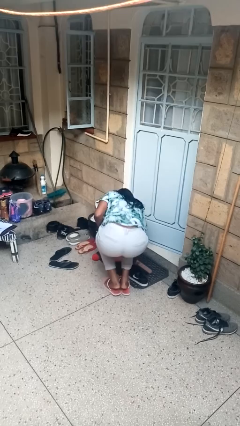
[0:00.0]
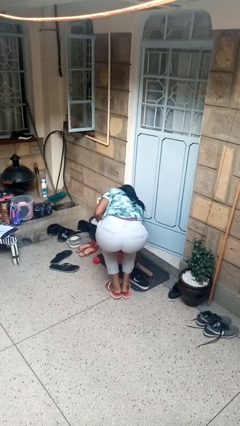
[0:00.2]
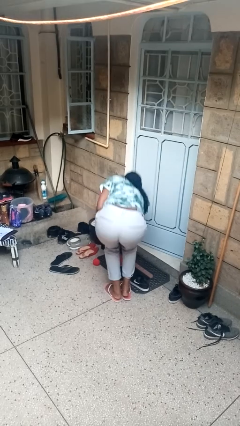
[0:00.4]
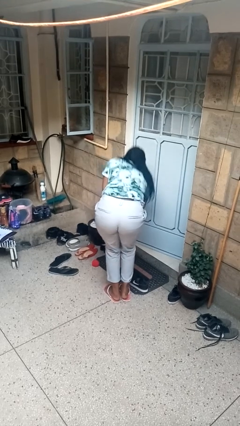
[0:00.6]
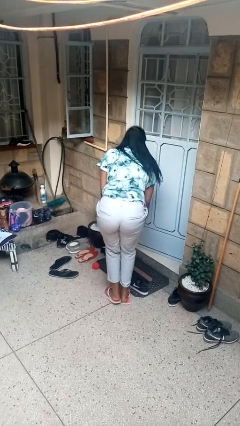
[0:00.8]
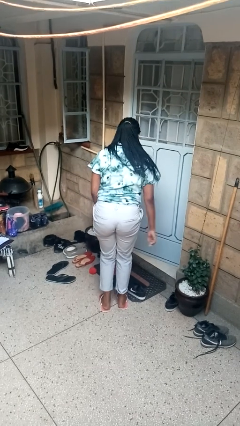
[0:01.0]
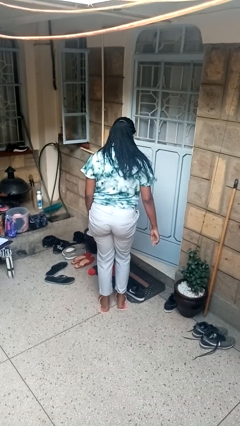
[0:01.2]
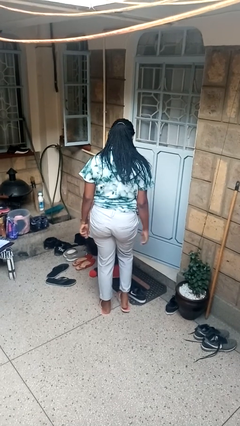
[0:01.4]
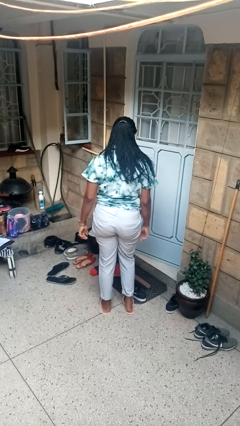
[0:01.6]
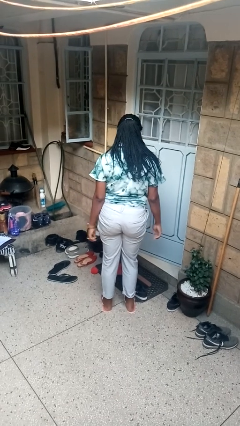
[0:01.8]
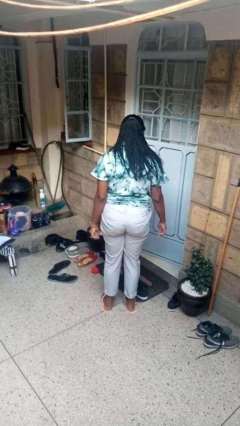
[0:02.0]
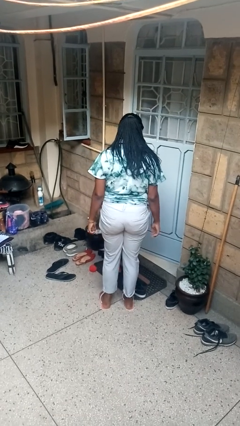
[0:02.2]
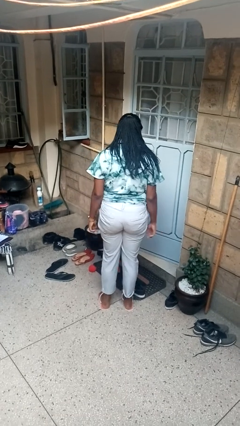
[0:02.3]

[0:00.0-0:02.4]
person stands up from floor

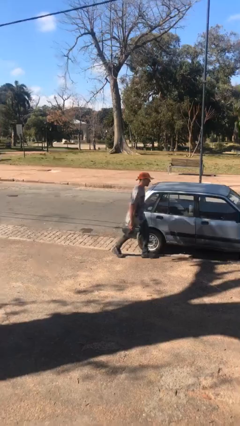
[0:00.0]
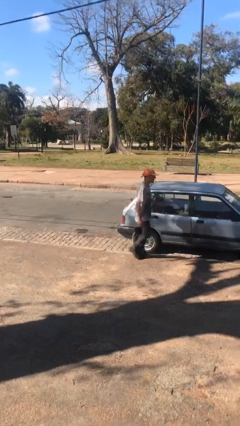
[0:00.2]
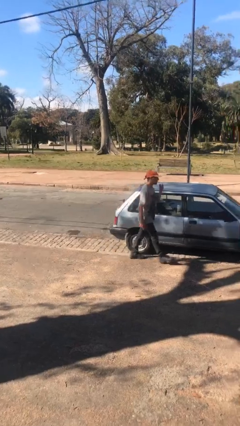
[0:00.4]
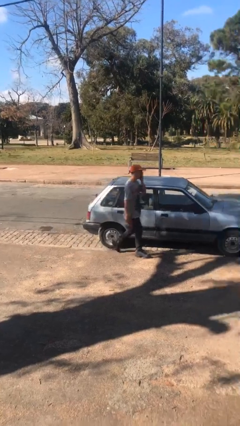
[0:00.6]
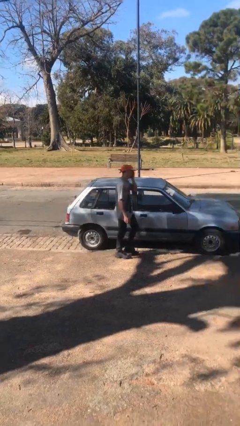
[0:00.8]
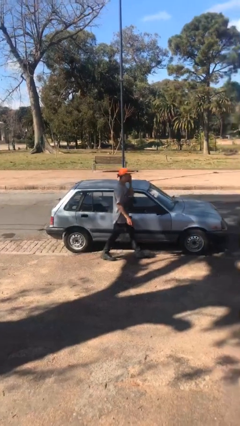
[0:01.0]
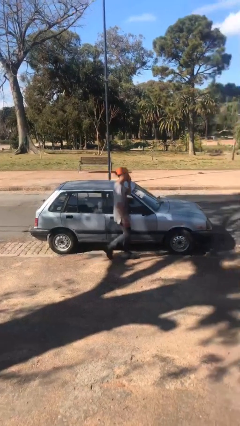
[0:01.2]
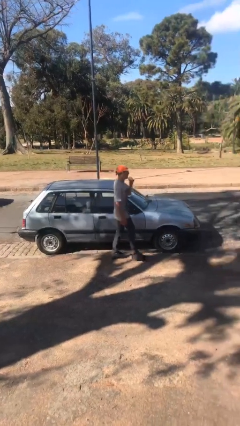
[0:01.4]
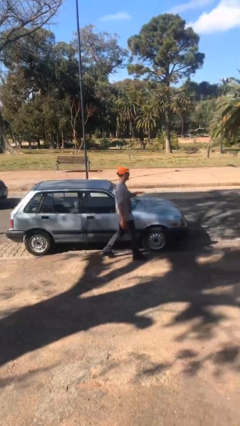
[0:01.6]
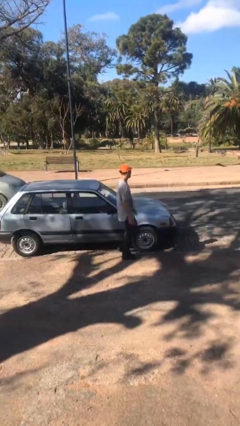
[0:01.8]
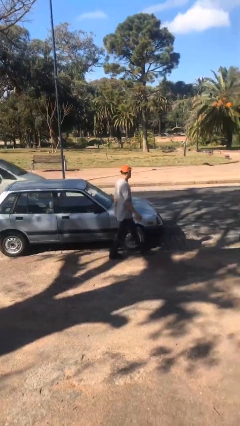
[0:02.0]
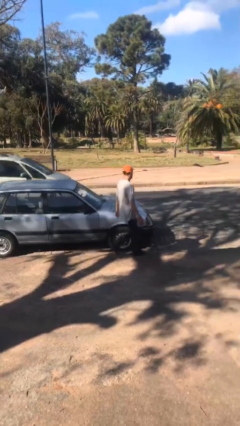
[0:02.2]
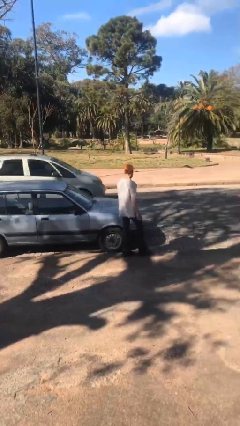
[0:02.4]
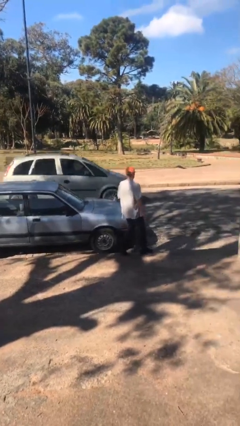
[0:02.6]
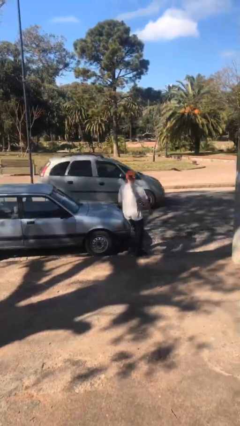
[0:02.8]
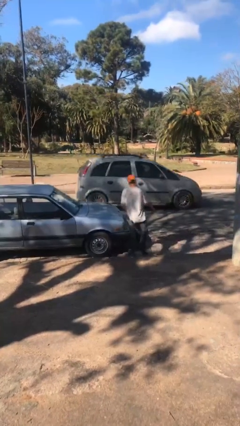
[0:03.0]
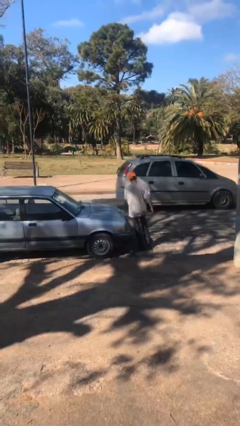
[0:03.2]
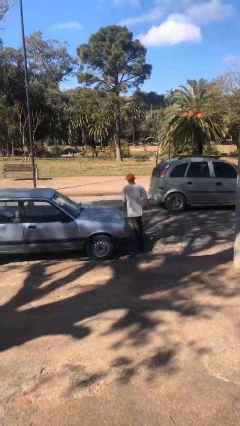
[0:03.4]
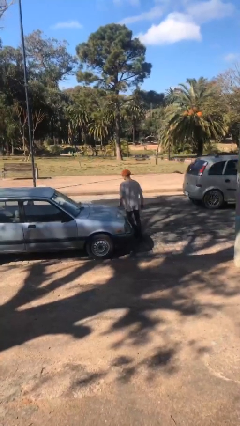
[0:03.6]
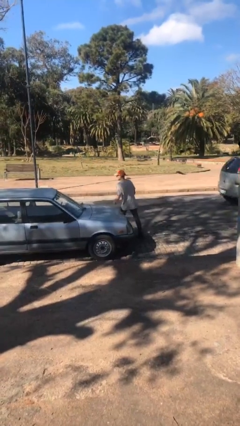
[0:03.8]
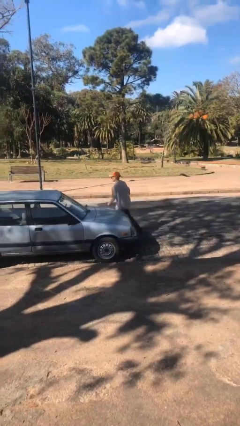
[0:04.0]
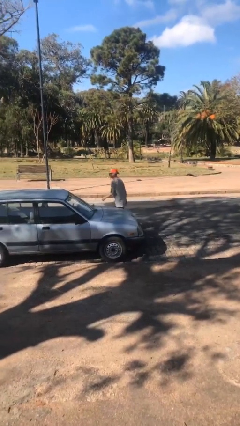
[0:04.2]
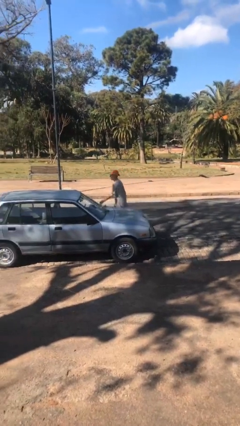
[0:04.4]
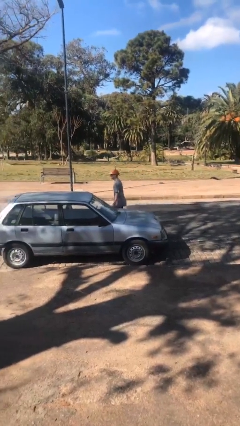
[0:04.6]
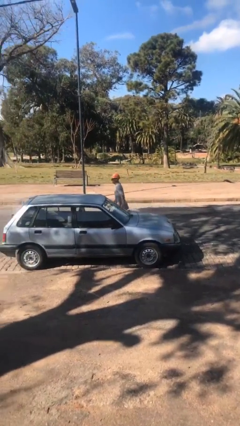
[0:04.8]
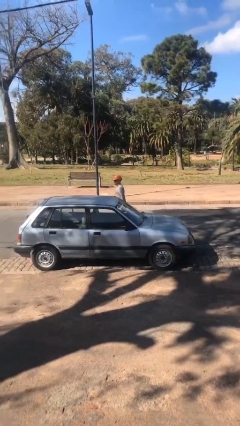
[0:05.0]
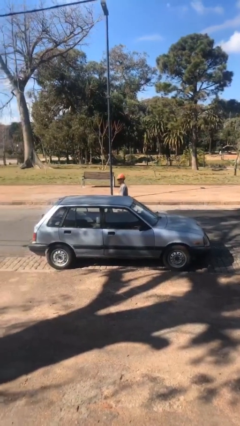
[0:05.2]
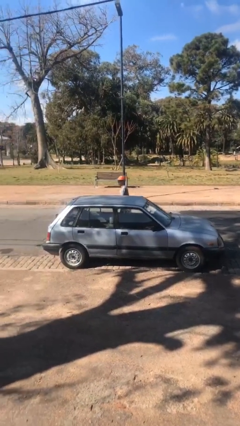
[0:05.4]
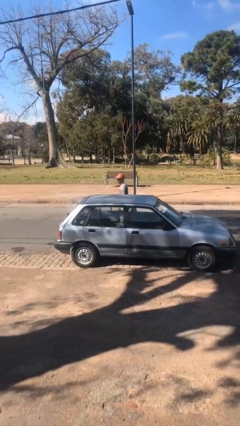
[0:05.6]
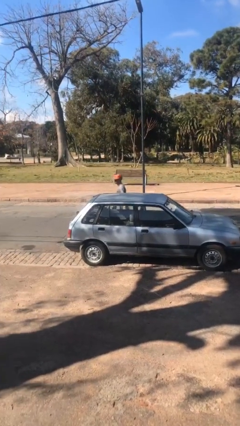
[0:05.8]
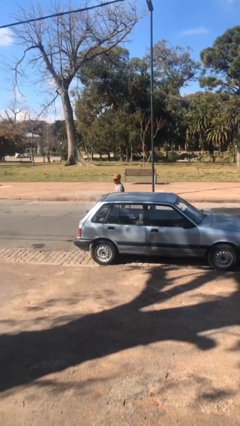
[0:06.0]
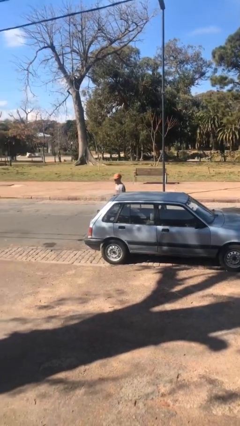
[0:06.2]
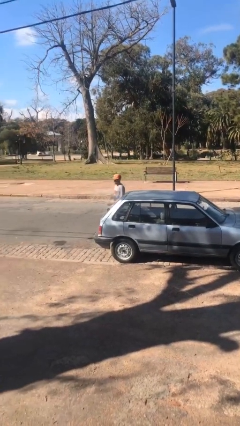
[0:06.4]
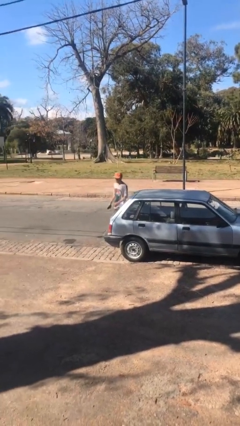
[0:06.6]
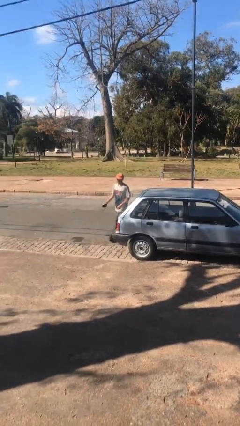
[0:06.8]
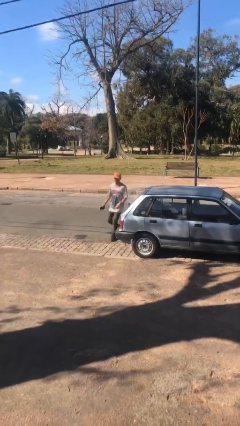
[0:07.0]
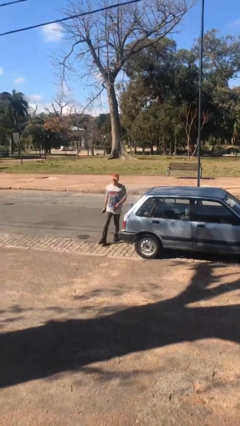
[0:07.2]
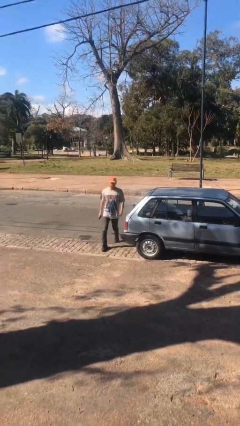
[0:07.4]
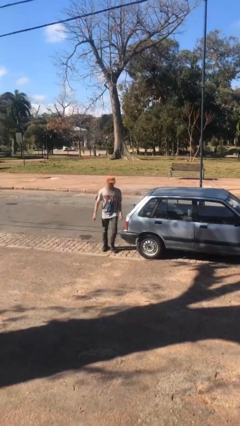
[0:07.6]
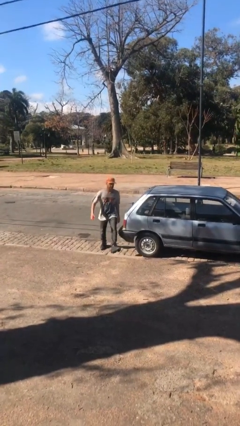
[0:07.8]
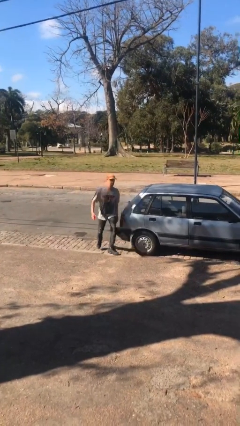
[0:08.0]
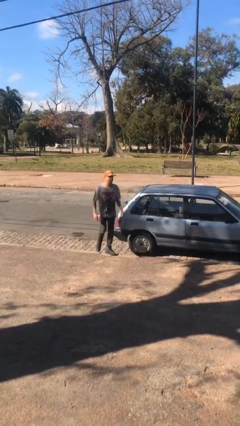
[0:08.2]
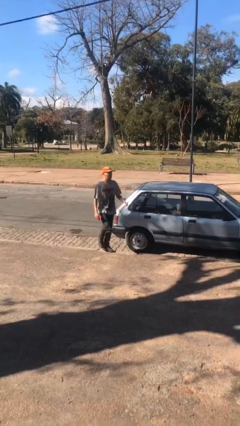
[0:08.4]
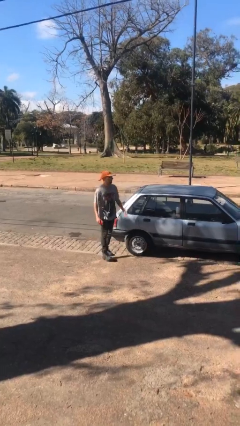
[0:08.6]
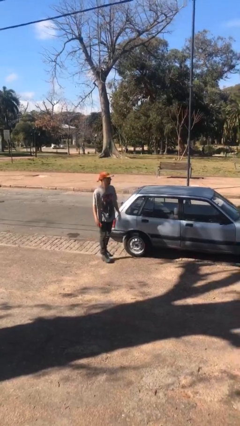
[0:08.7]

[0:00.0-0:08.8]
person walks around car

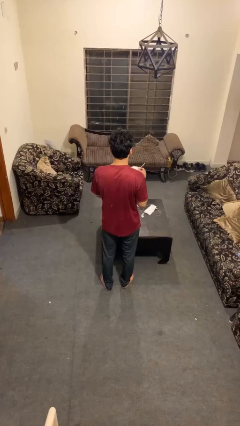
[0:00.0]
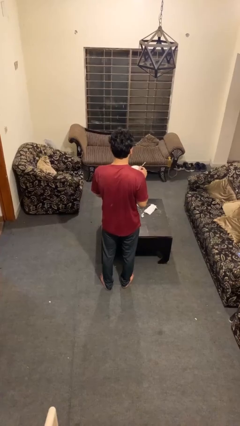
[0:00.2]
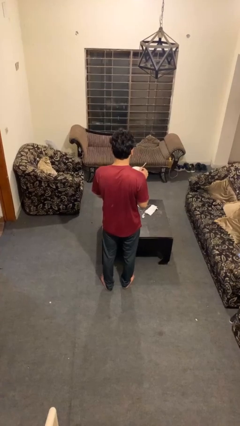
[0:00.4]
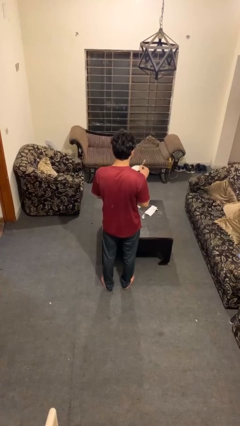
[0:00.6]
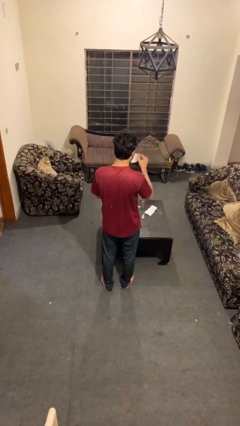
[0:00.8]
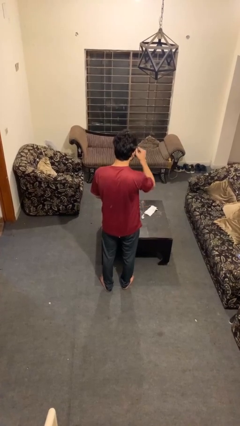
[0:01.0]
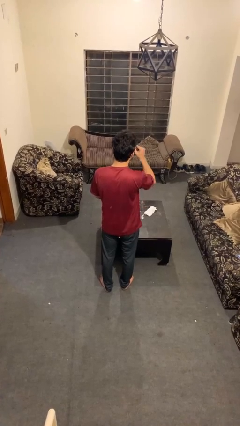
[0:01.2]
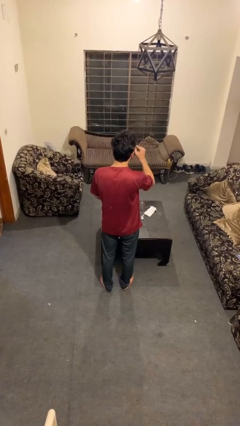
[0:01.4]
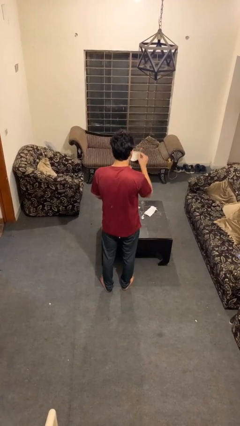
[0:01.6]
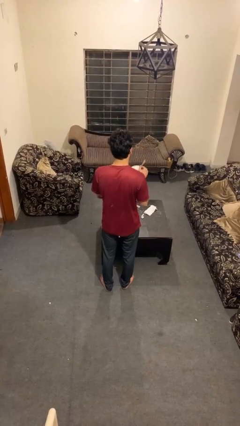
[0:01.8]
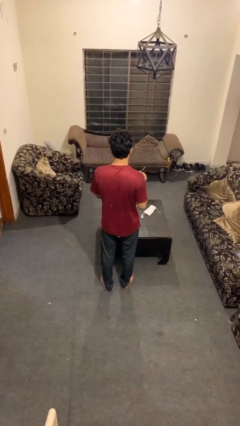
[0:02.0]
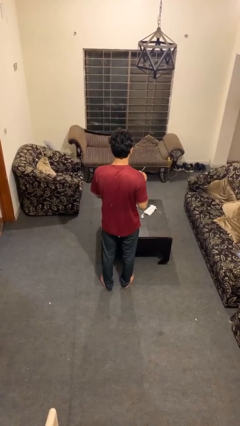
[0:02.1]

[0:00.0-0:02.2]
person drinks from mug

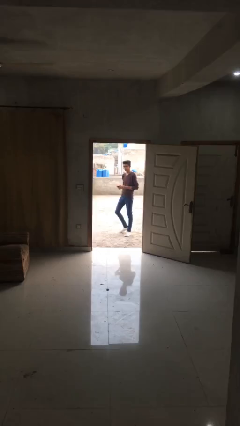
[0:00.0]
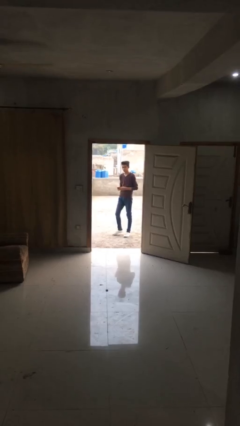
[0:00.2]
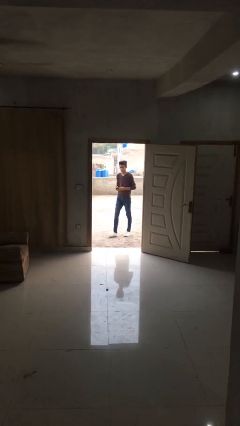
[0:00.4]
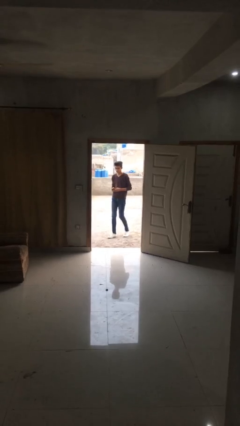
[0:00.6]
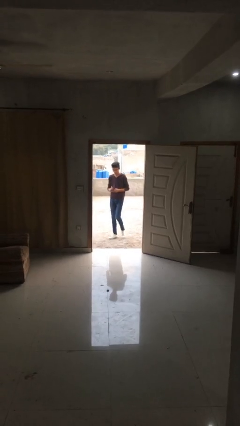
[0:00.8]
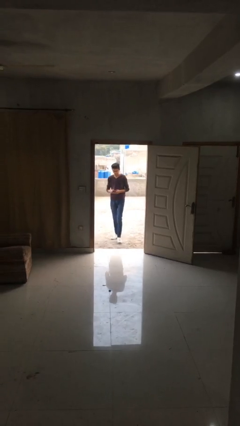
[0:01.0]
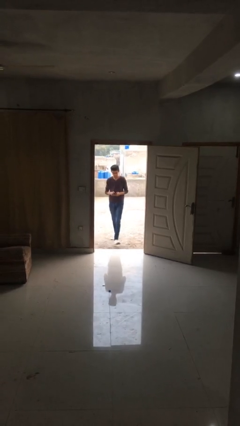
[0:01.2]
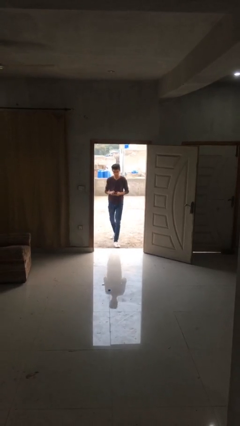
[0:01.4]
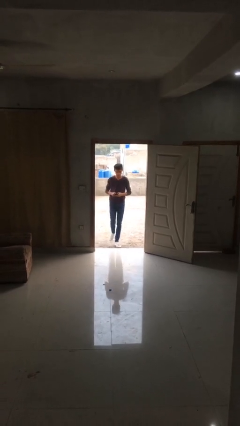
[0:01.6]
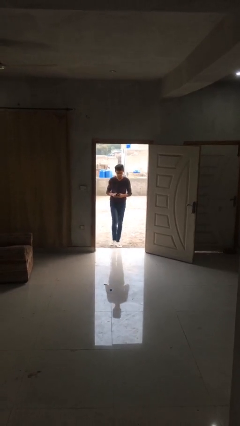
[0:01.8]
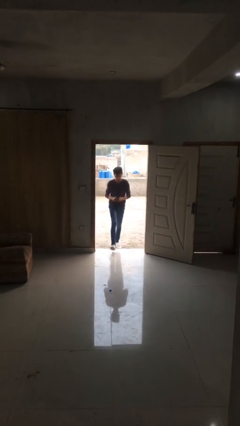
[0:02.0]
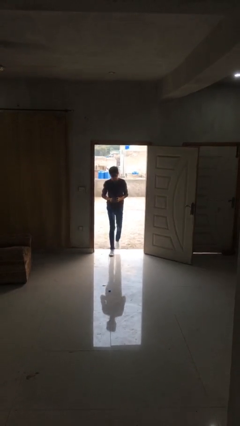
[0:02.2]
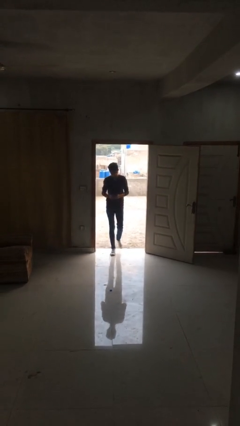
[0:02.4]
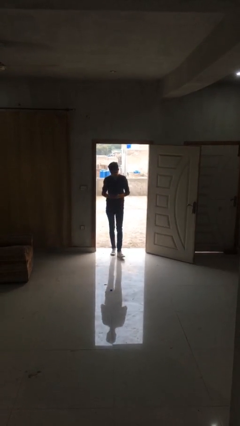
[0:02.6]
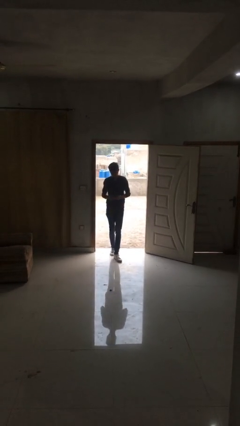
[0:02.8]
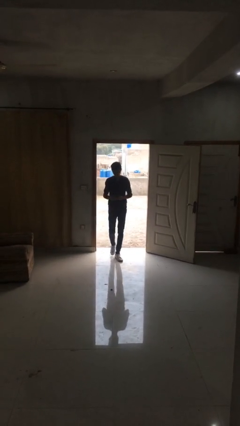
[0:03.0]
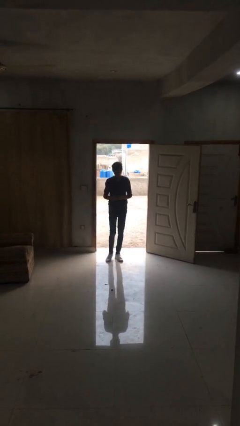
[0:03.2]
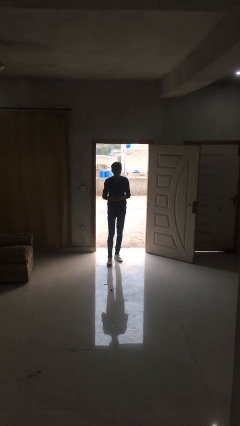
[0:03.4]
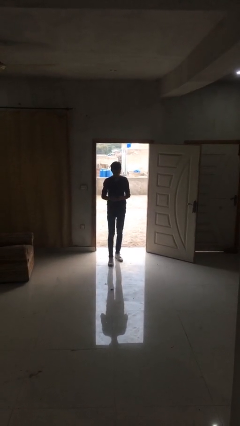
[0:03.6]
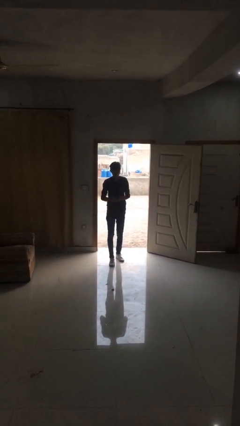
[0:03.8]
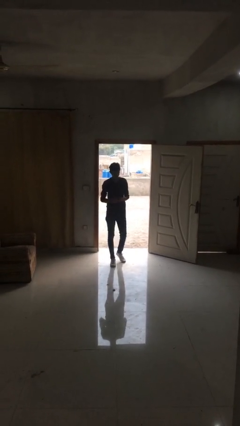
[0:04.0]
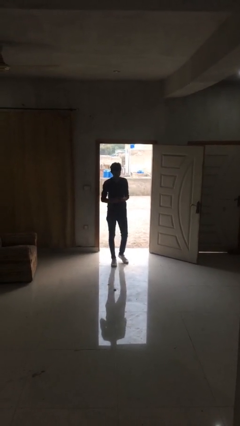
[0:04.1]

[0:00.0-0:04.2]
person enters scene through structure
